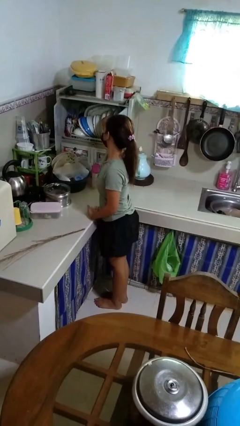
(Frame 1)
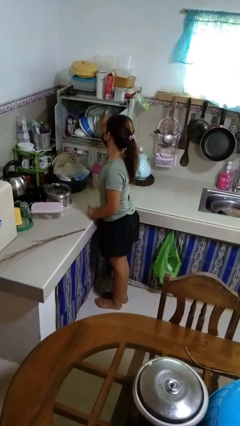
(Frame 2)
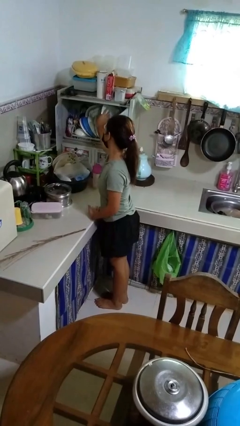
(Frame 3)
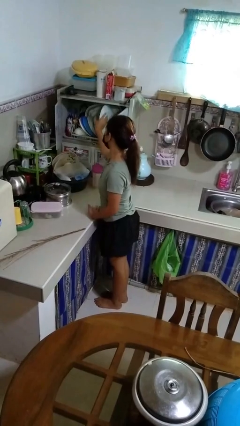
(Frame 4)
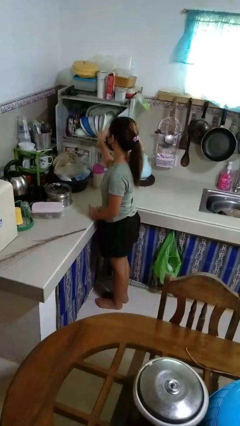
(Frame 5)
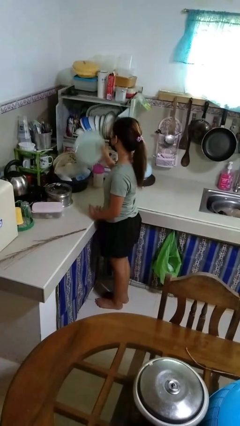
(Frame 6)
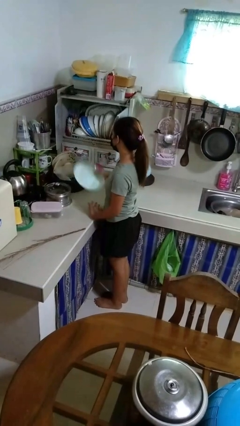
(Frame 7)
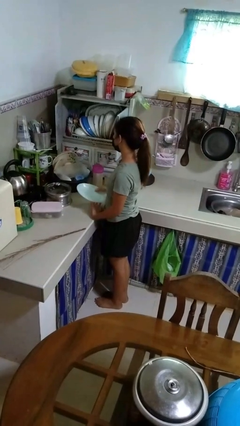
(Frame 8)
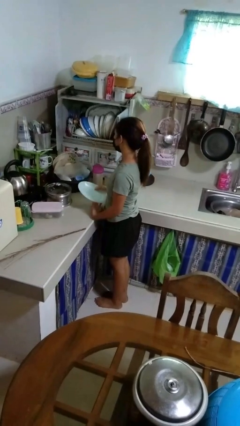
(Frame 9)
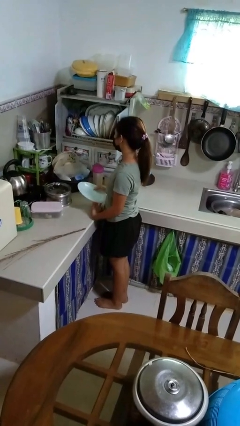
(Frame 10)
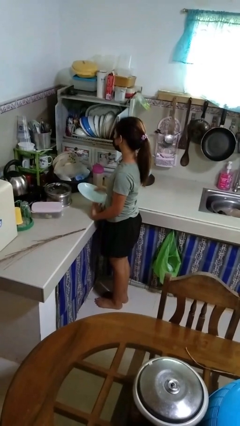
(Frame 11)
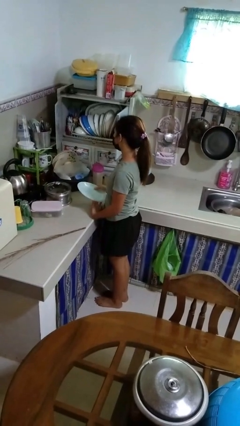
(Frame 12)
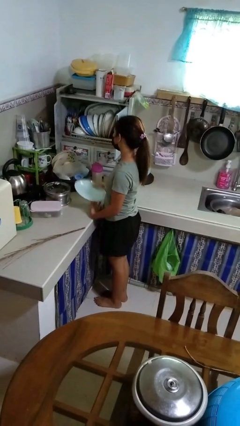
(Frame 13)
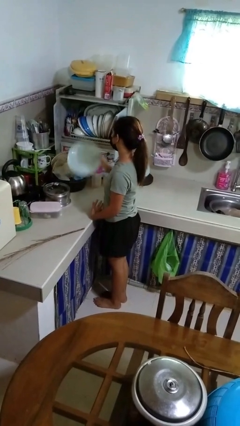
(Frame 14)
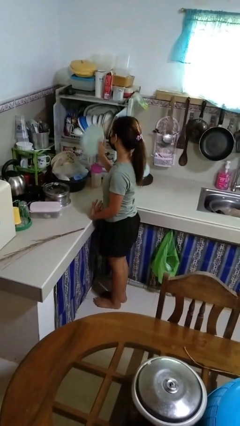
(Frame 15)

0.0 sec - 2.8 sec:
person takes object from kitchen drawer

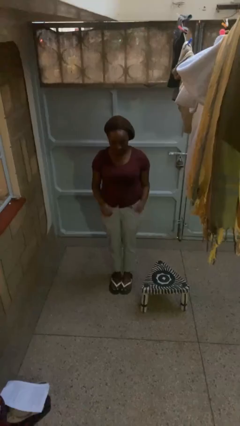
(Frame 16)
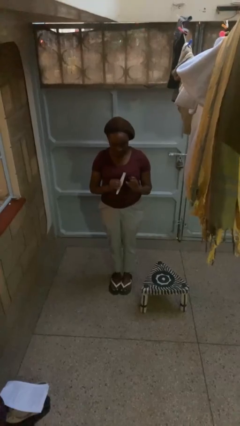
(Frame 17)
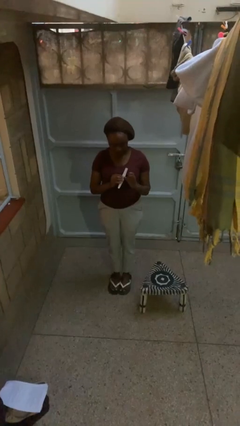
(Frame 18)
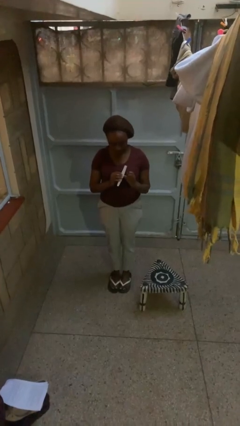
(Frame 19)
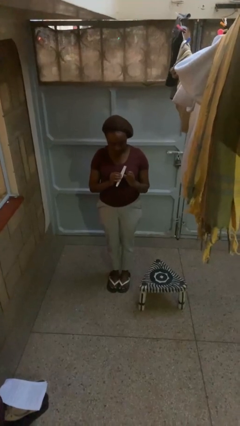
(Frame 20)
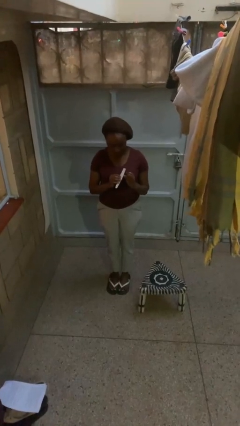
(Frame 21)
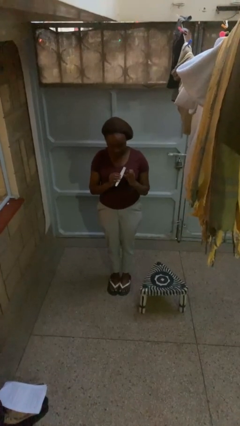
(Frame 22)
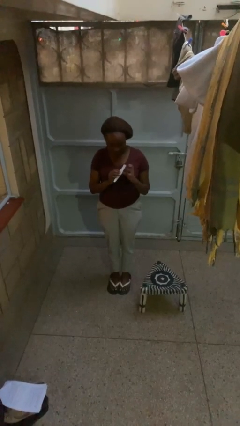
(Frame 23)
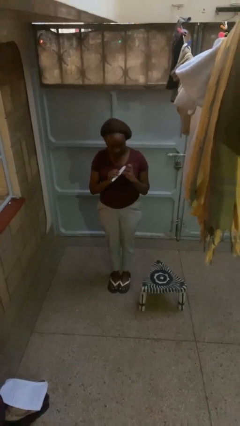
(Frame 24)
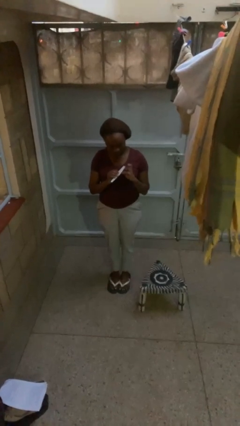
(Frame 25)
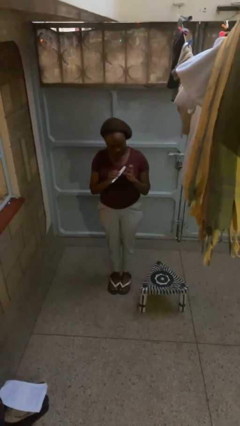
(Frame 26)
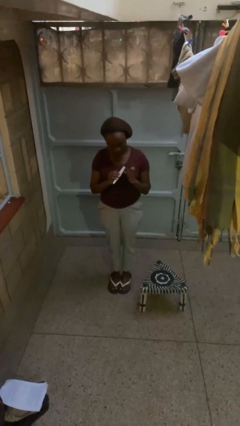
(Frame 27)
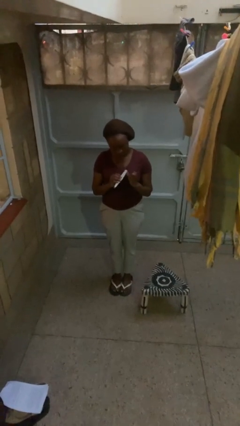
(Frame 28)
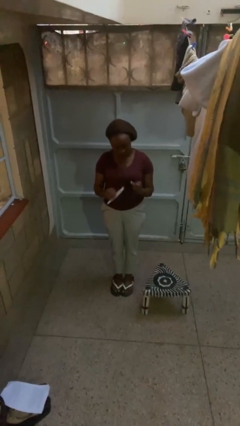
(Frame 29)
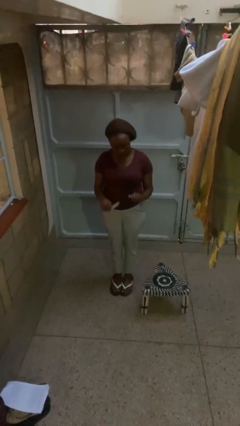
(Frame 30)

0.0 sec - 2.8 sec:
person files fingernails

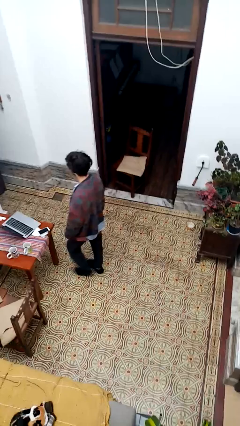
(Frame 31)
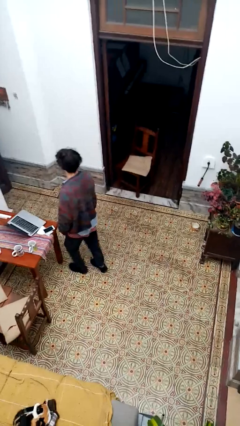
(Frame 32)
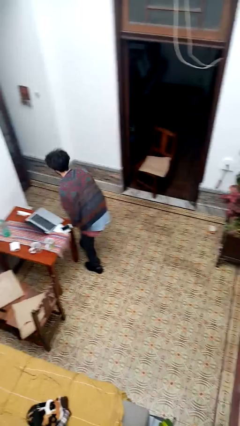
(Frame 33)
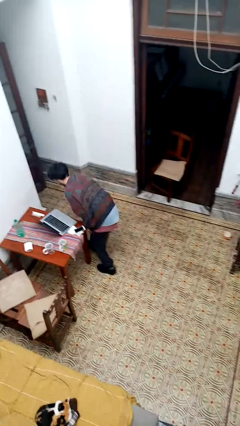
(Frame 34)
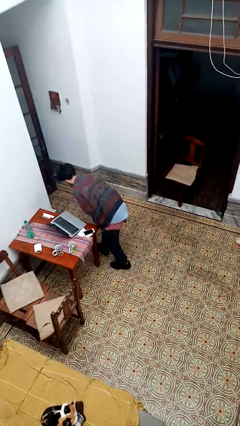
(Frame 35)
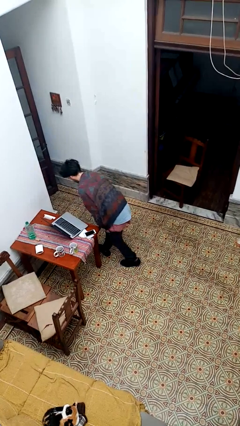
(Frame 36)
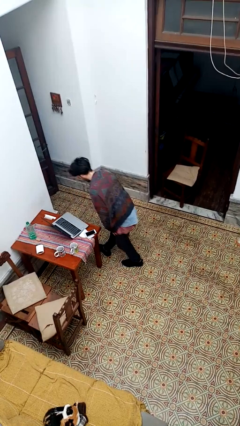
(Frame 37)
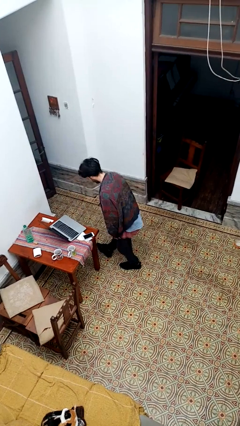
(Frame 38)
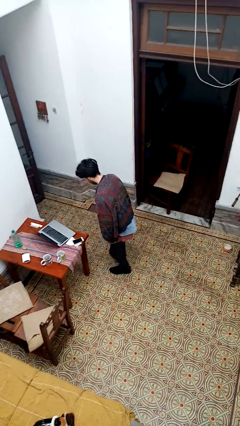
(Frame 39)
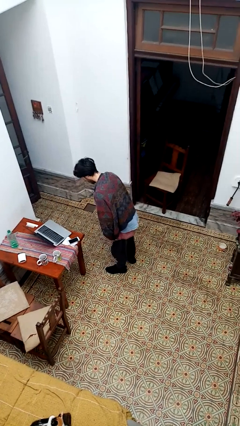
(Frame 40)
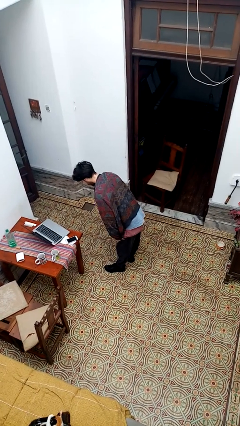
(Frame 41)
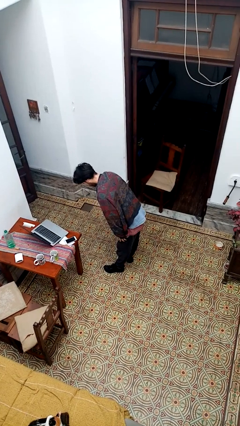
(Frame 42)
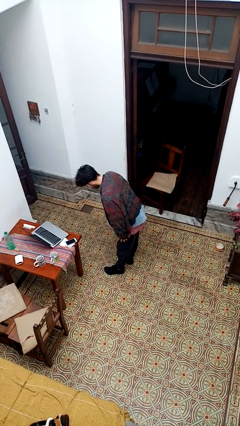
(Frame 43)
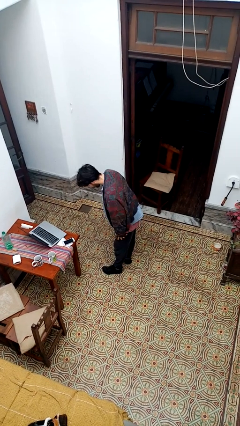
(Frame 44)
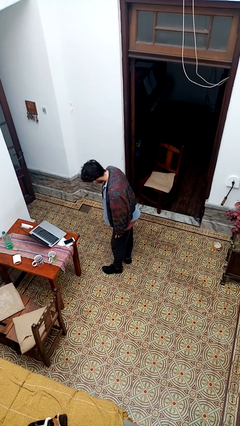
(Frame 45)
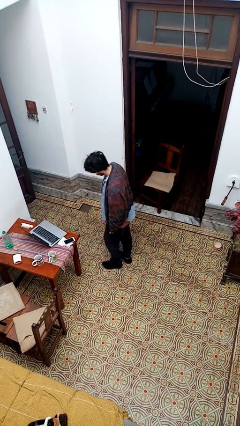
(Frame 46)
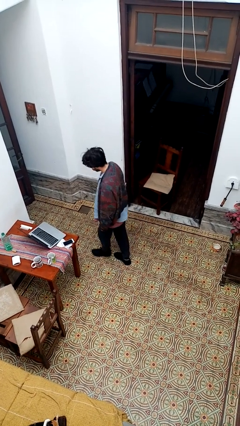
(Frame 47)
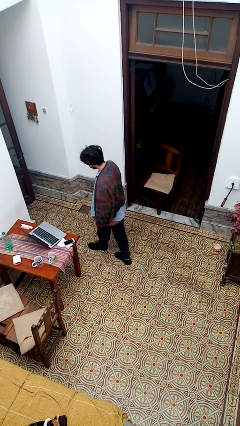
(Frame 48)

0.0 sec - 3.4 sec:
person bumps into table

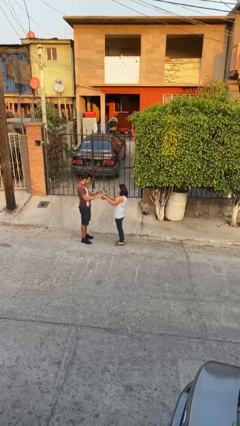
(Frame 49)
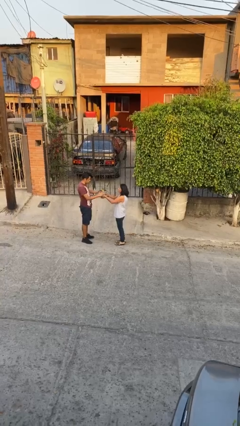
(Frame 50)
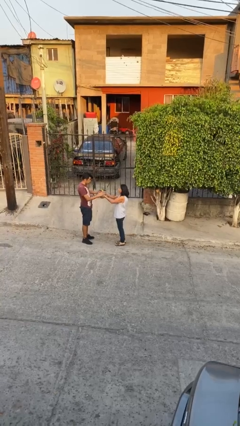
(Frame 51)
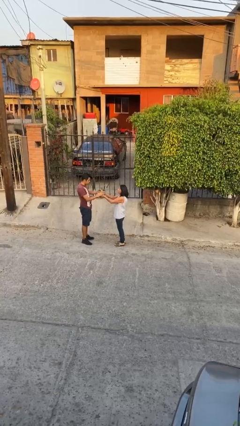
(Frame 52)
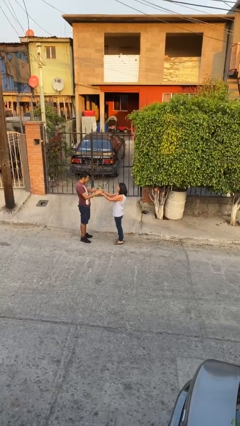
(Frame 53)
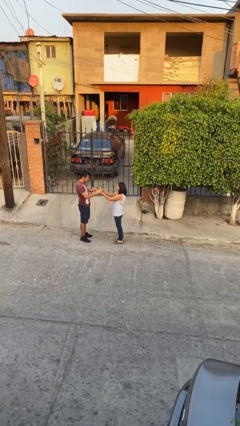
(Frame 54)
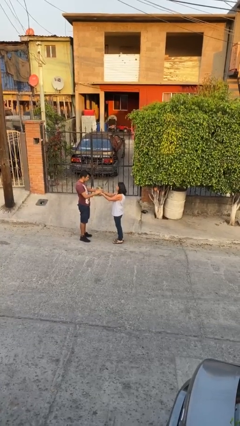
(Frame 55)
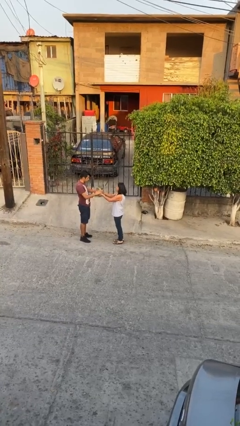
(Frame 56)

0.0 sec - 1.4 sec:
person transfers object to person

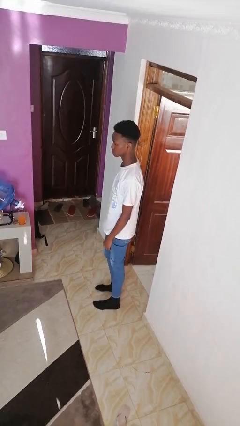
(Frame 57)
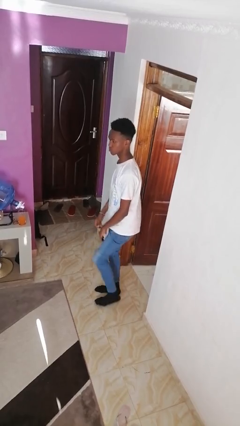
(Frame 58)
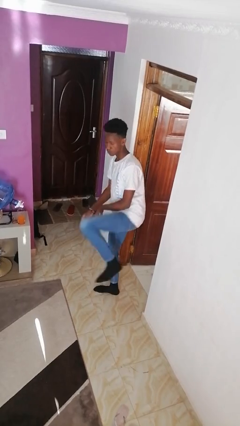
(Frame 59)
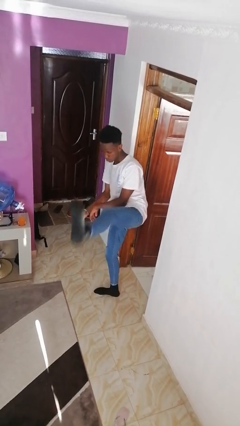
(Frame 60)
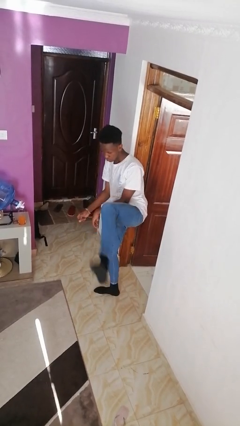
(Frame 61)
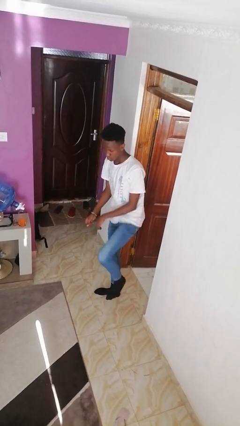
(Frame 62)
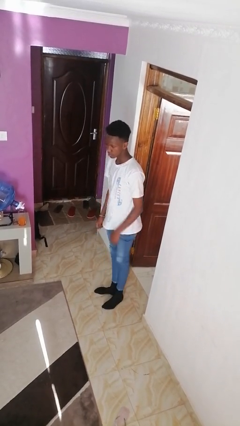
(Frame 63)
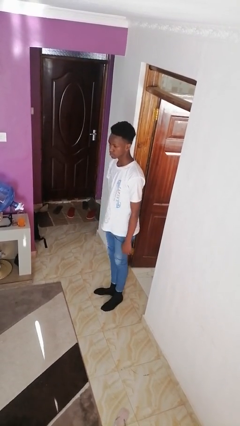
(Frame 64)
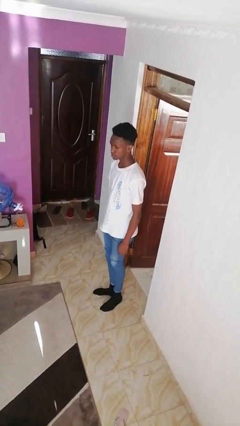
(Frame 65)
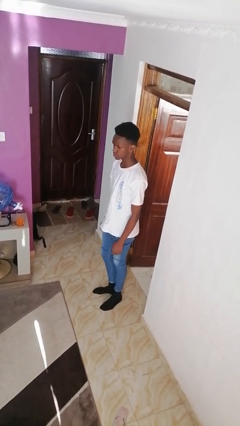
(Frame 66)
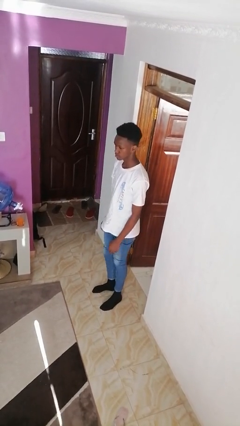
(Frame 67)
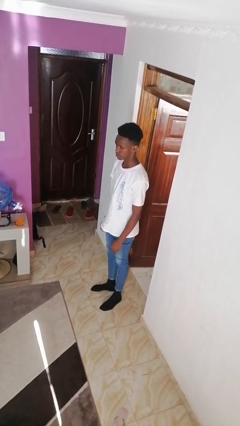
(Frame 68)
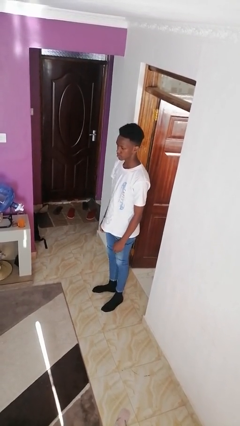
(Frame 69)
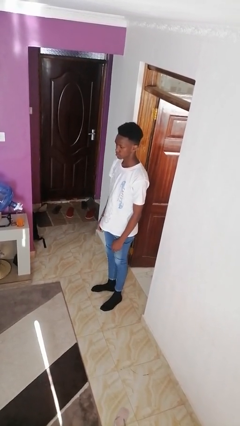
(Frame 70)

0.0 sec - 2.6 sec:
person karate kicks

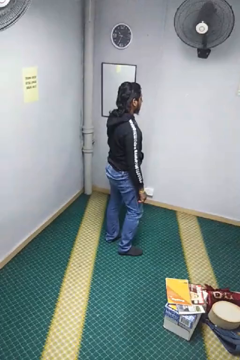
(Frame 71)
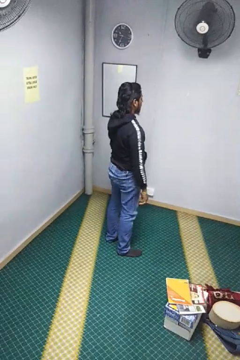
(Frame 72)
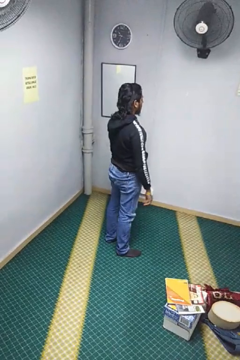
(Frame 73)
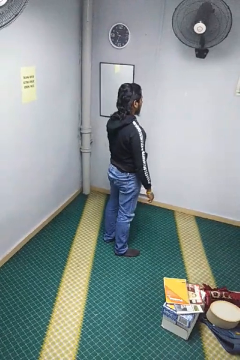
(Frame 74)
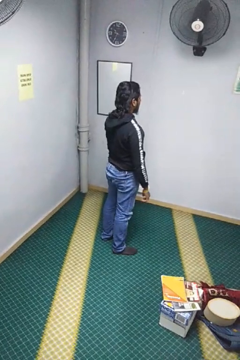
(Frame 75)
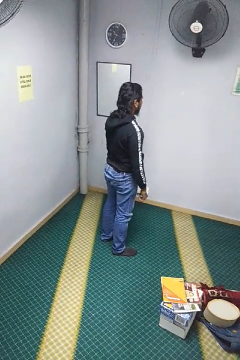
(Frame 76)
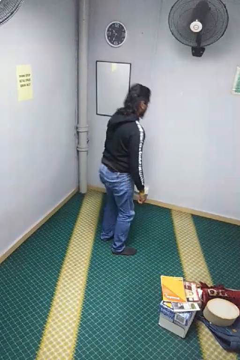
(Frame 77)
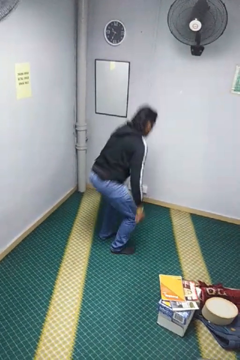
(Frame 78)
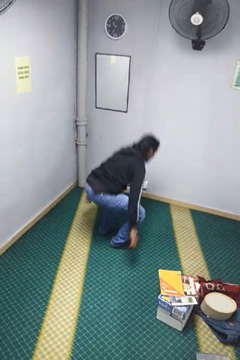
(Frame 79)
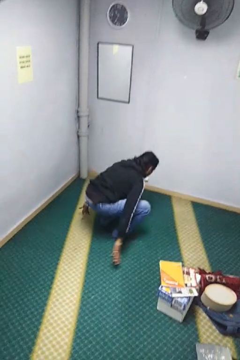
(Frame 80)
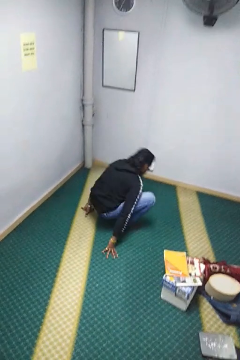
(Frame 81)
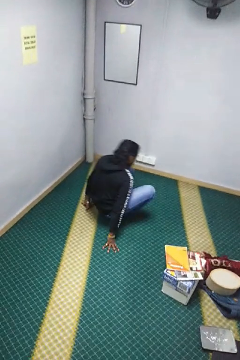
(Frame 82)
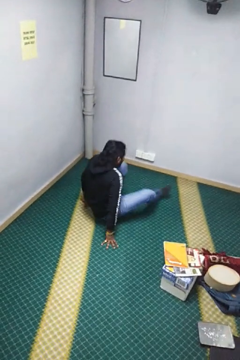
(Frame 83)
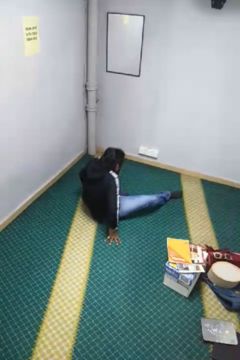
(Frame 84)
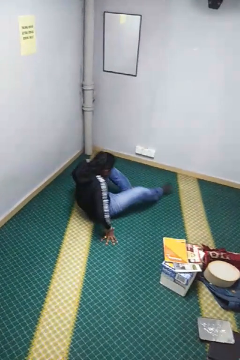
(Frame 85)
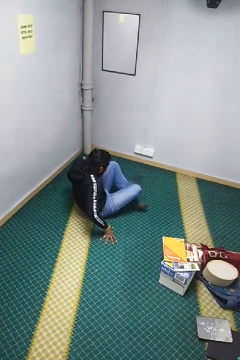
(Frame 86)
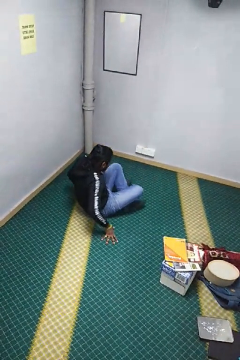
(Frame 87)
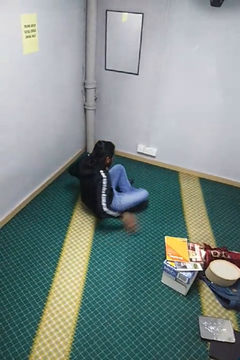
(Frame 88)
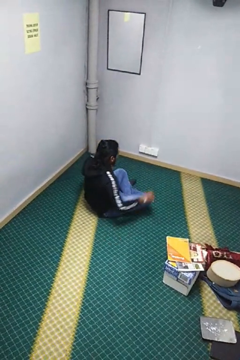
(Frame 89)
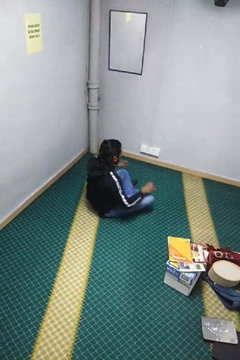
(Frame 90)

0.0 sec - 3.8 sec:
person sits crisscross

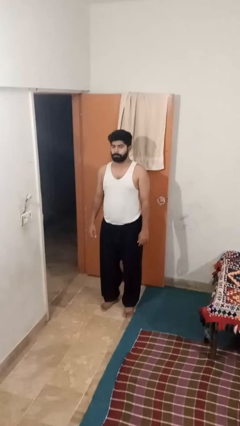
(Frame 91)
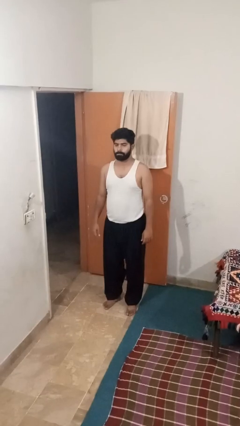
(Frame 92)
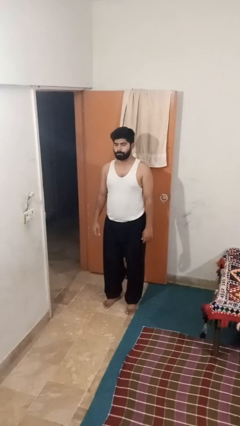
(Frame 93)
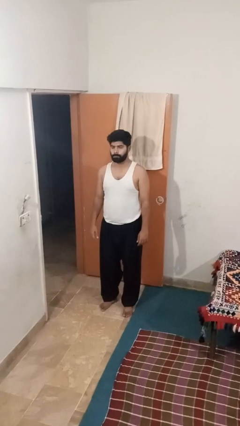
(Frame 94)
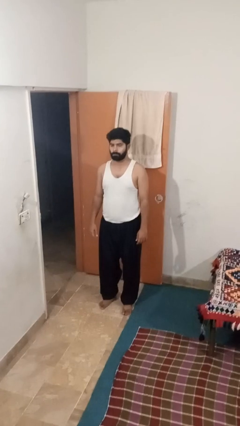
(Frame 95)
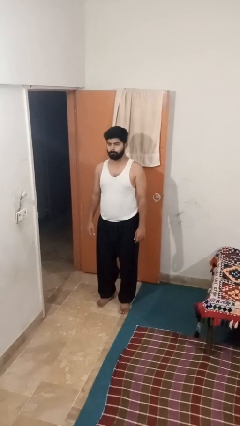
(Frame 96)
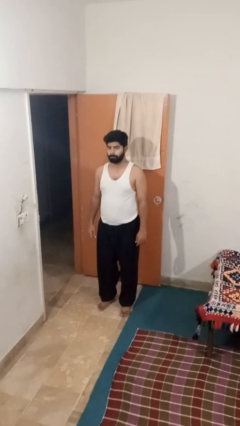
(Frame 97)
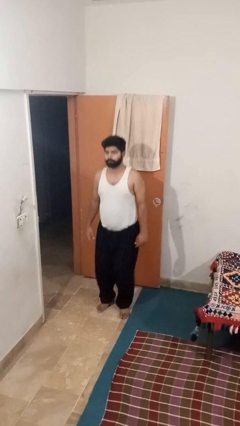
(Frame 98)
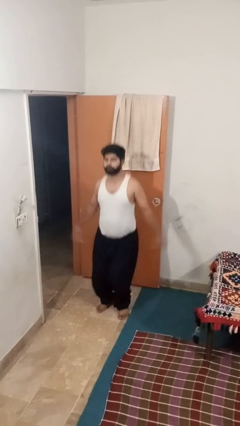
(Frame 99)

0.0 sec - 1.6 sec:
person exercises with jumping jacks
